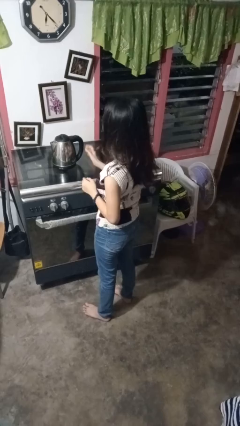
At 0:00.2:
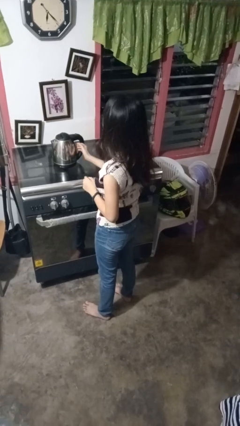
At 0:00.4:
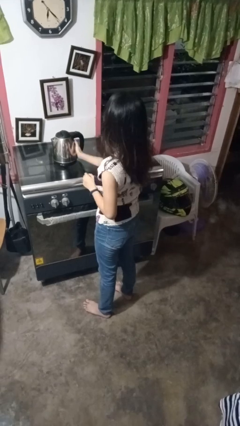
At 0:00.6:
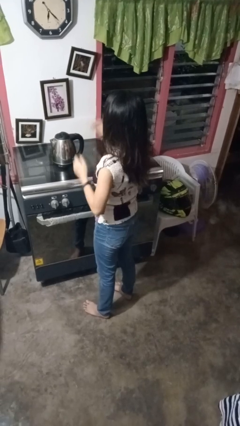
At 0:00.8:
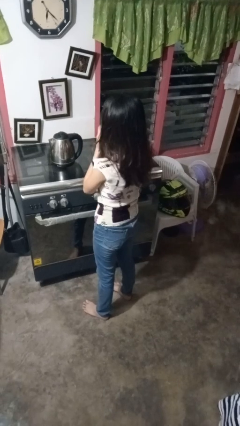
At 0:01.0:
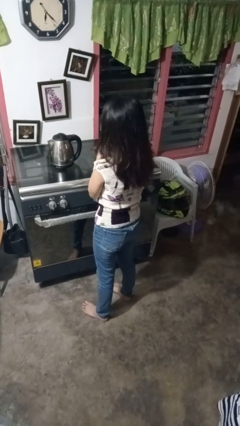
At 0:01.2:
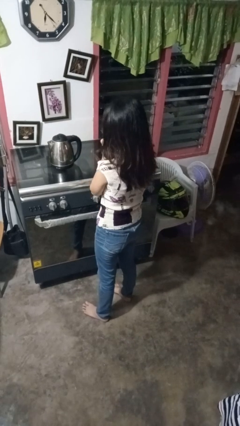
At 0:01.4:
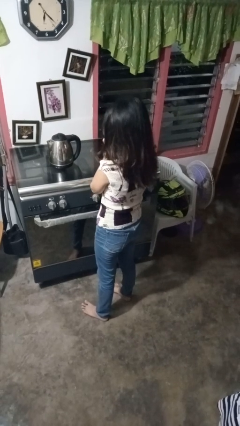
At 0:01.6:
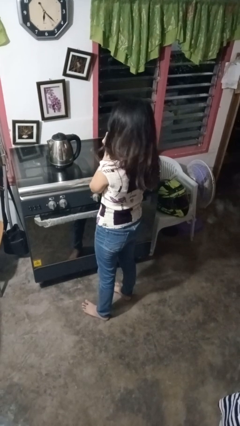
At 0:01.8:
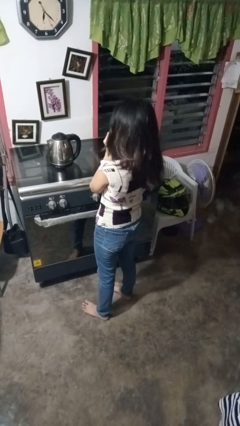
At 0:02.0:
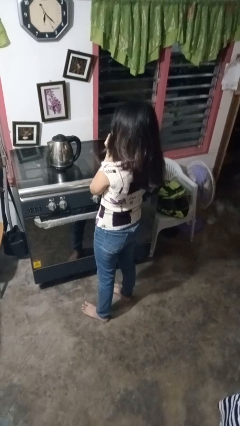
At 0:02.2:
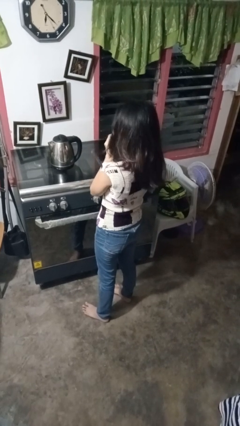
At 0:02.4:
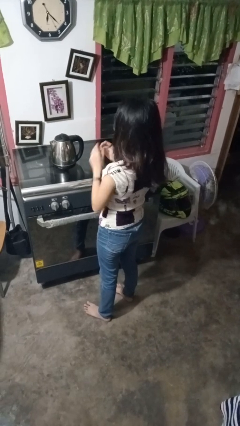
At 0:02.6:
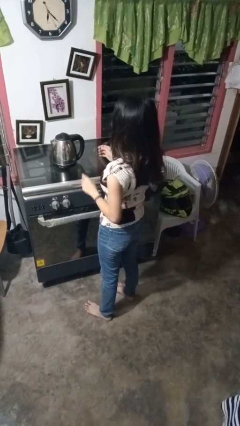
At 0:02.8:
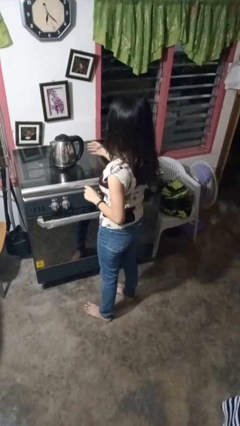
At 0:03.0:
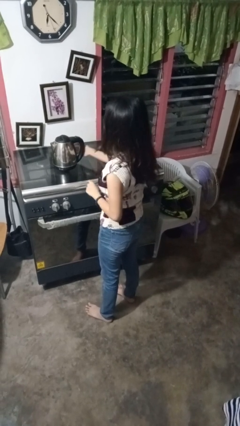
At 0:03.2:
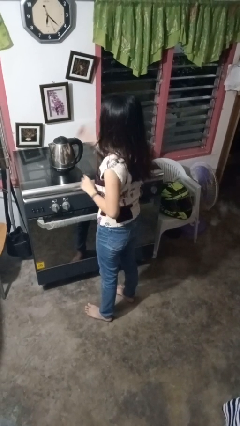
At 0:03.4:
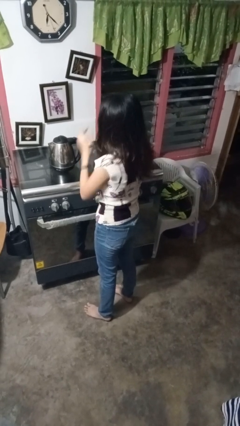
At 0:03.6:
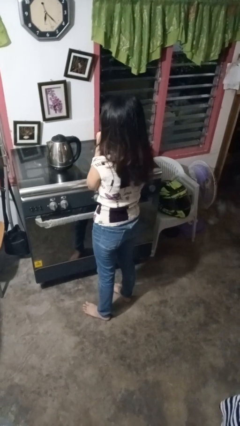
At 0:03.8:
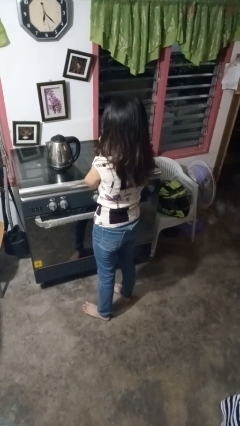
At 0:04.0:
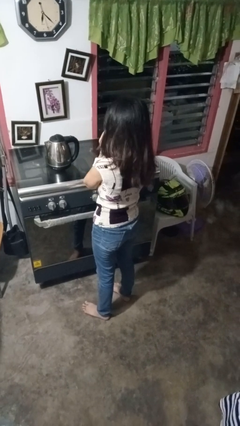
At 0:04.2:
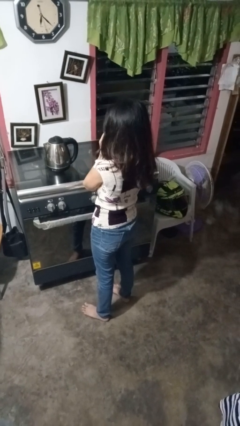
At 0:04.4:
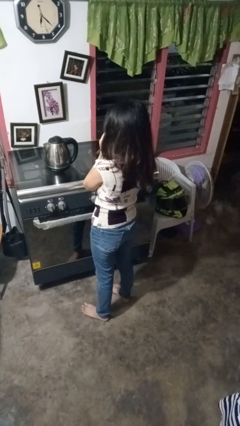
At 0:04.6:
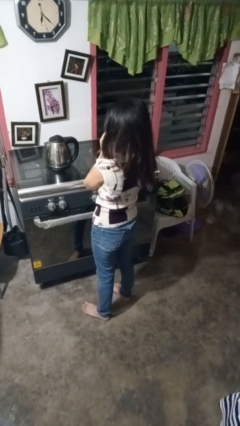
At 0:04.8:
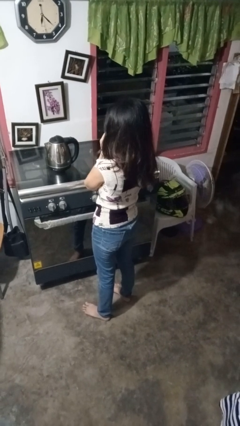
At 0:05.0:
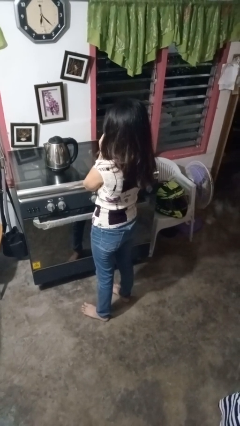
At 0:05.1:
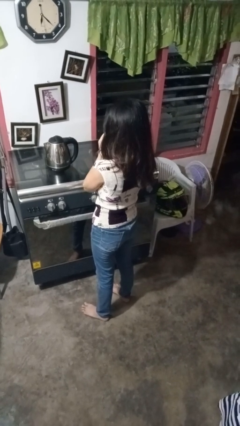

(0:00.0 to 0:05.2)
person puts on hoodie

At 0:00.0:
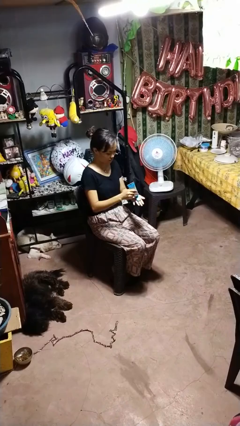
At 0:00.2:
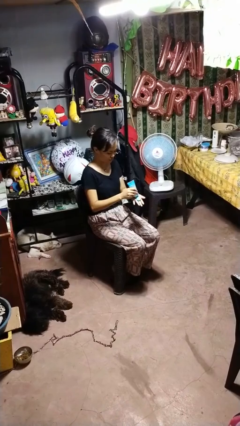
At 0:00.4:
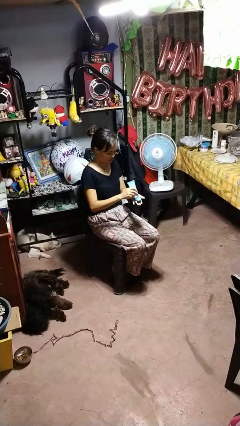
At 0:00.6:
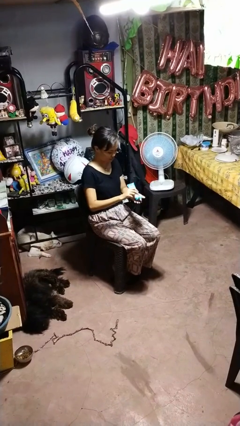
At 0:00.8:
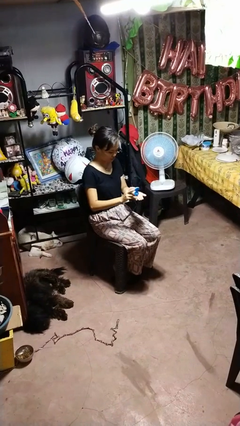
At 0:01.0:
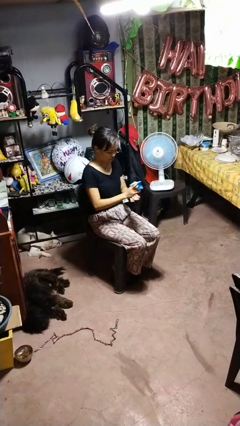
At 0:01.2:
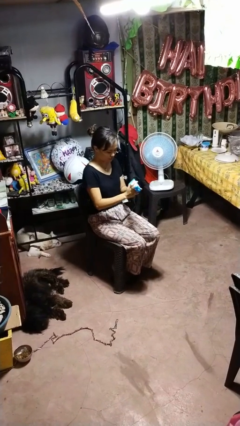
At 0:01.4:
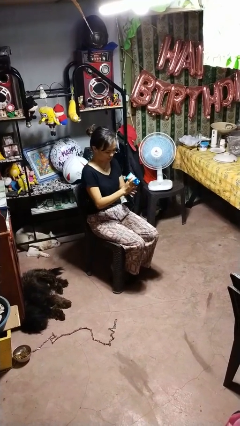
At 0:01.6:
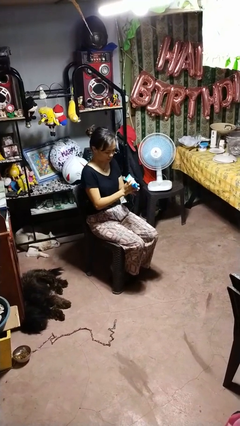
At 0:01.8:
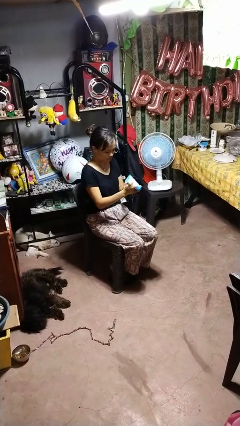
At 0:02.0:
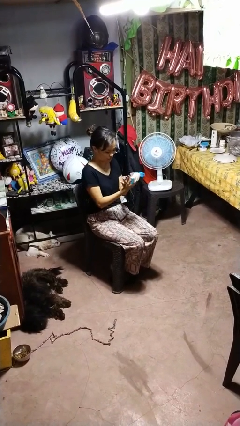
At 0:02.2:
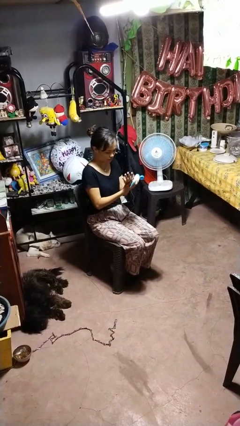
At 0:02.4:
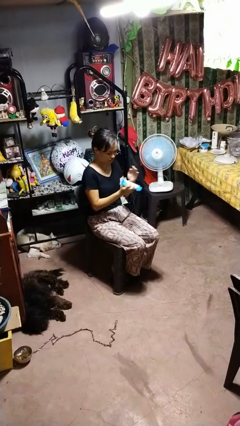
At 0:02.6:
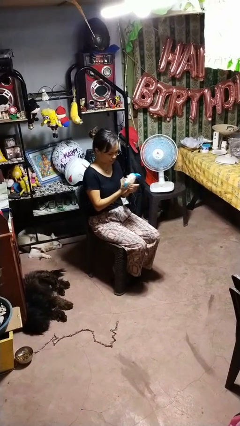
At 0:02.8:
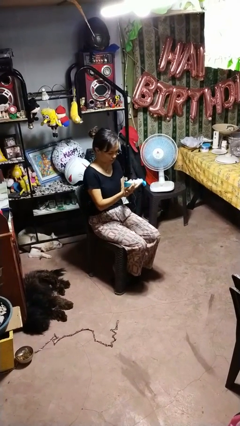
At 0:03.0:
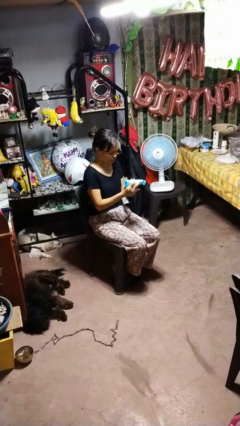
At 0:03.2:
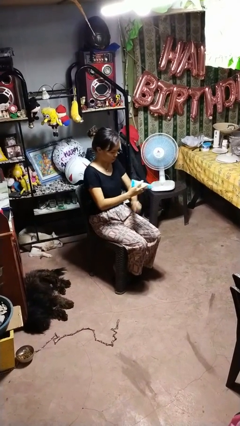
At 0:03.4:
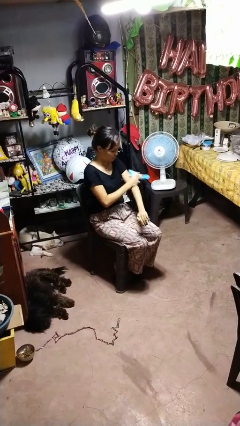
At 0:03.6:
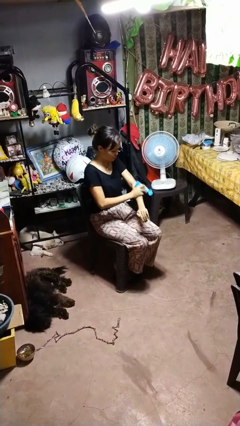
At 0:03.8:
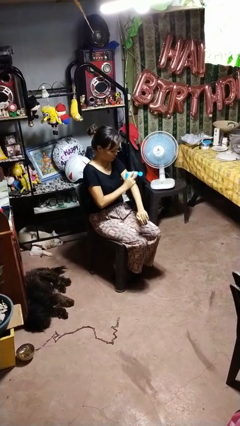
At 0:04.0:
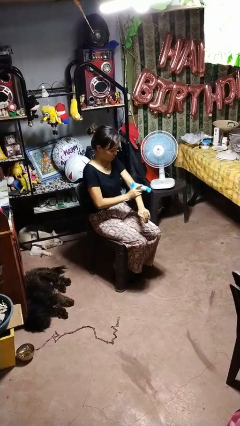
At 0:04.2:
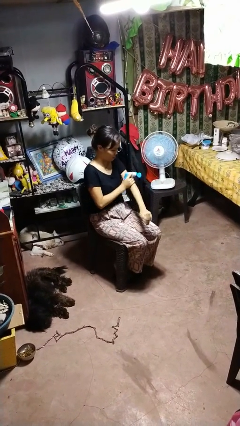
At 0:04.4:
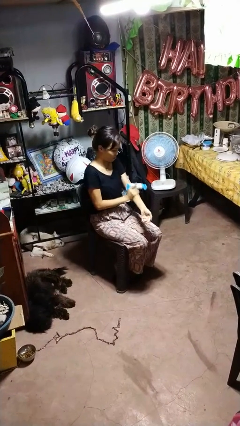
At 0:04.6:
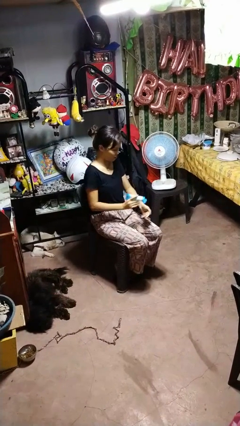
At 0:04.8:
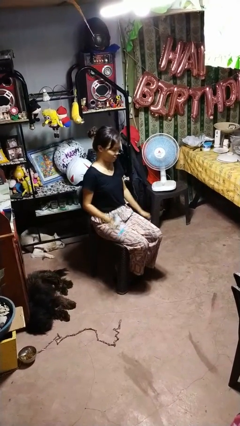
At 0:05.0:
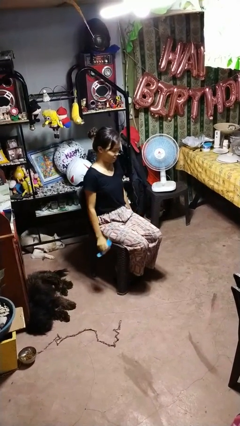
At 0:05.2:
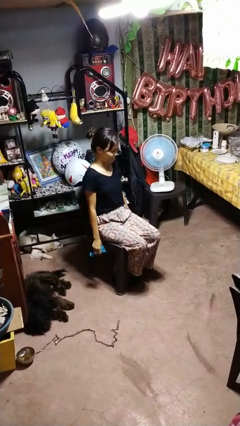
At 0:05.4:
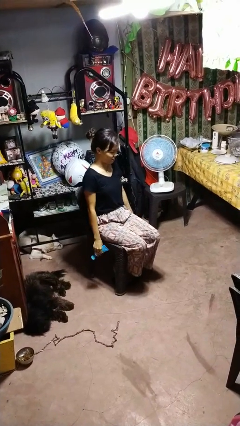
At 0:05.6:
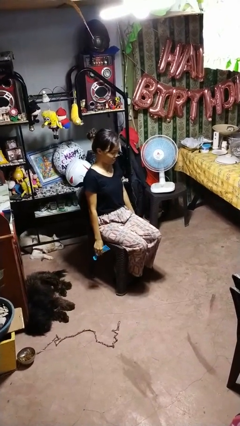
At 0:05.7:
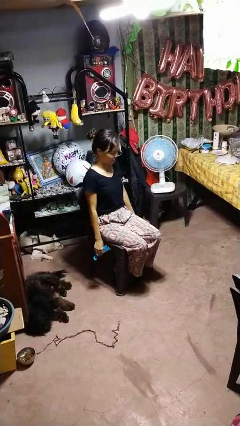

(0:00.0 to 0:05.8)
person applies sunscreen

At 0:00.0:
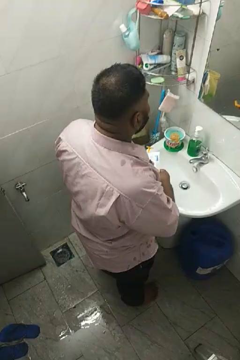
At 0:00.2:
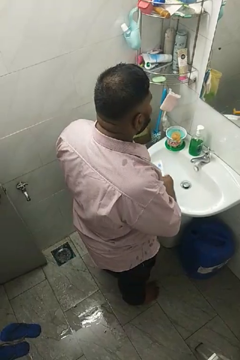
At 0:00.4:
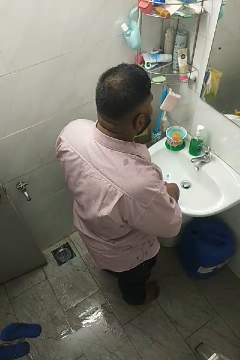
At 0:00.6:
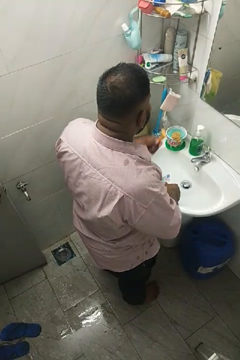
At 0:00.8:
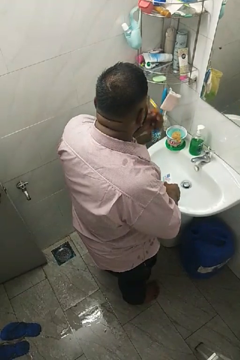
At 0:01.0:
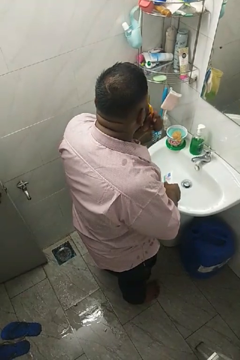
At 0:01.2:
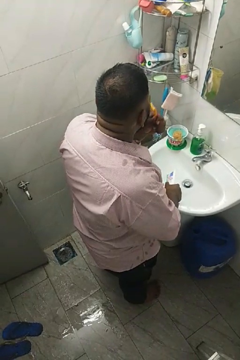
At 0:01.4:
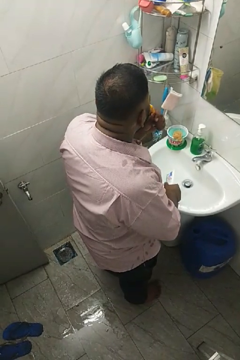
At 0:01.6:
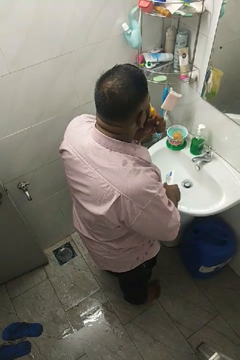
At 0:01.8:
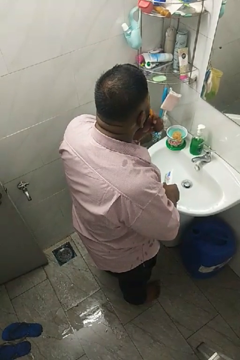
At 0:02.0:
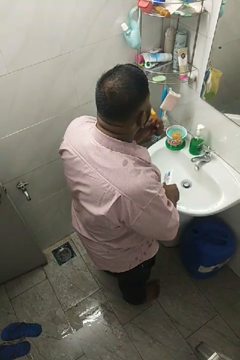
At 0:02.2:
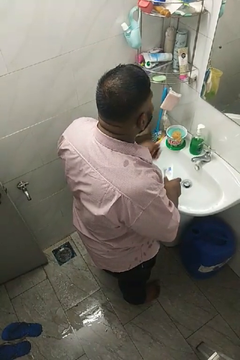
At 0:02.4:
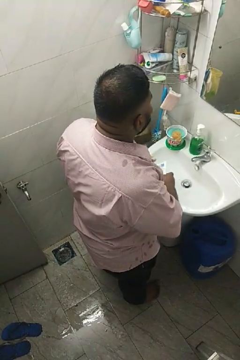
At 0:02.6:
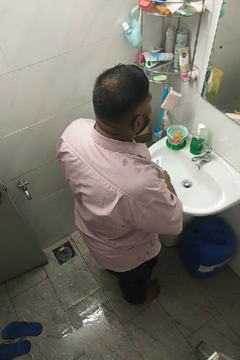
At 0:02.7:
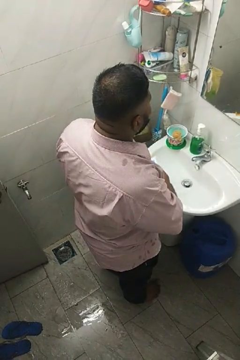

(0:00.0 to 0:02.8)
person shaves face

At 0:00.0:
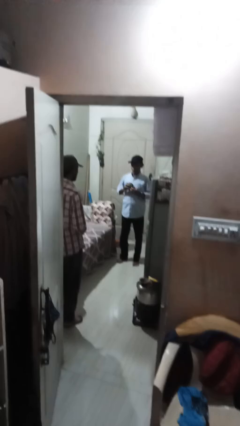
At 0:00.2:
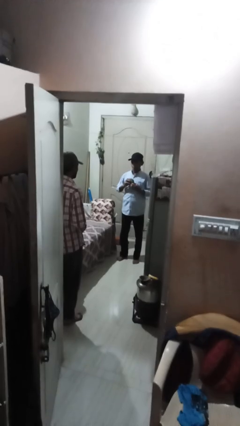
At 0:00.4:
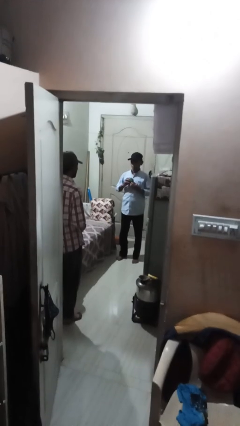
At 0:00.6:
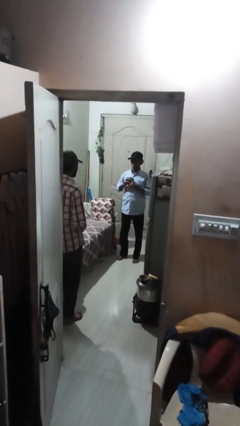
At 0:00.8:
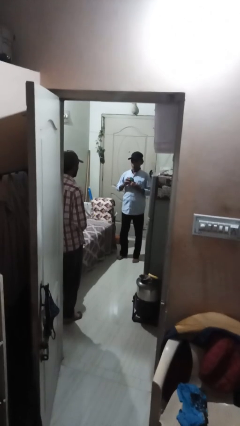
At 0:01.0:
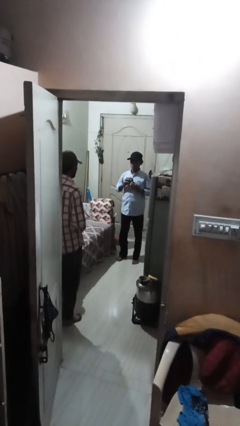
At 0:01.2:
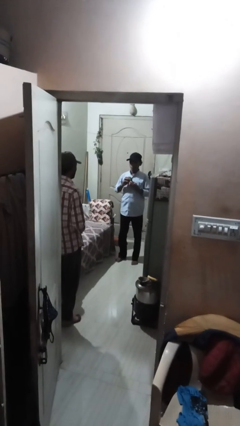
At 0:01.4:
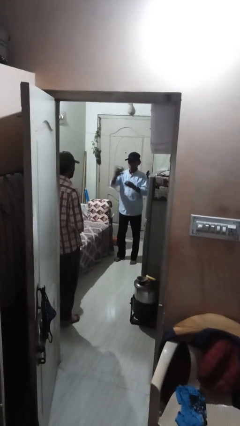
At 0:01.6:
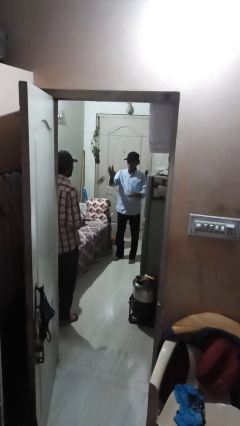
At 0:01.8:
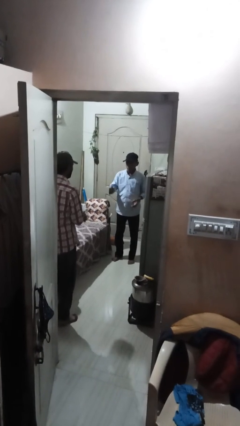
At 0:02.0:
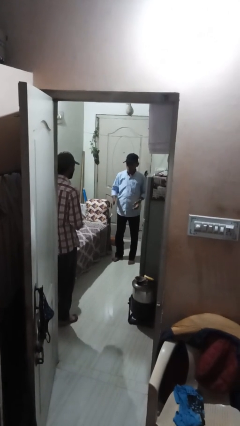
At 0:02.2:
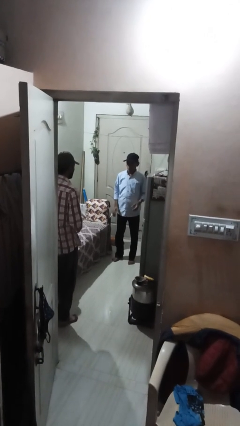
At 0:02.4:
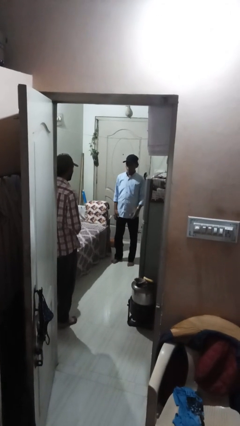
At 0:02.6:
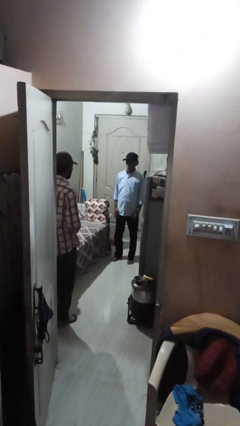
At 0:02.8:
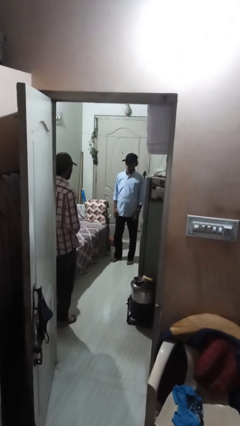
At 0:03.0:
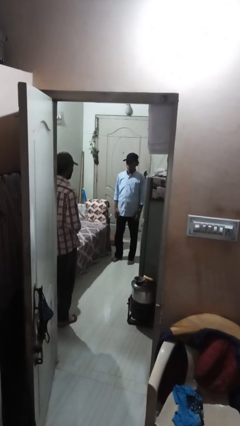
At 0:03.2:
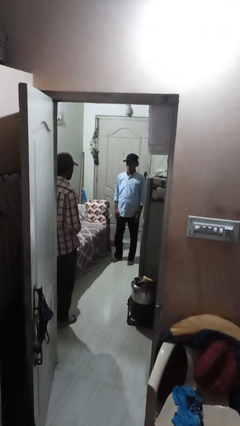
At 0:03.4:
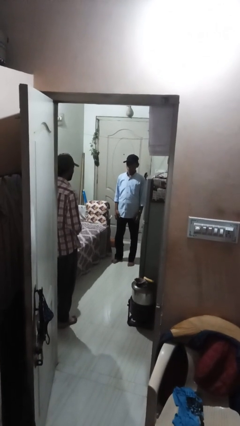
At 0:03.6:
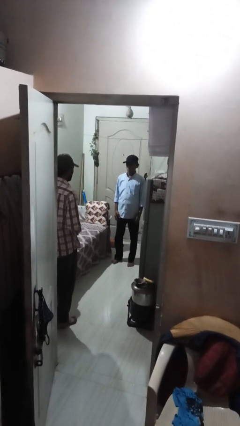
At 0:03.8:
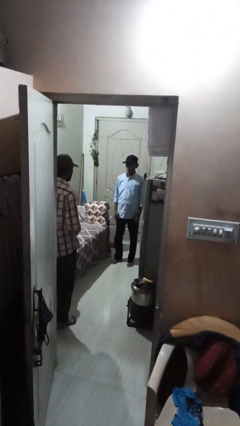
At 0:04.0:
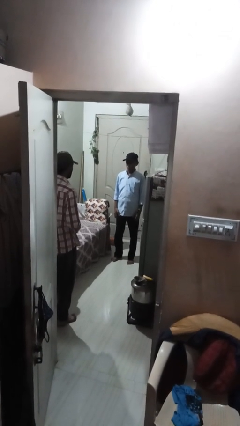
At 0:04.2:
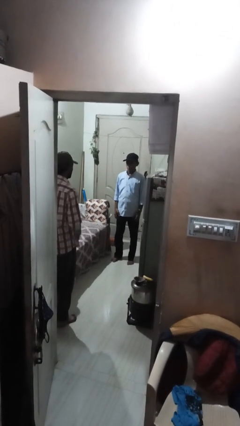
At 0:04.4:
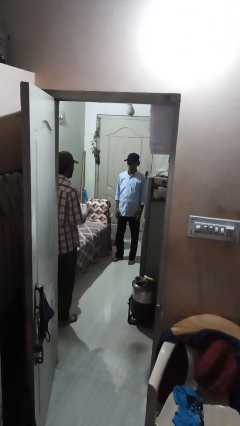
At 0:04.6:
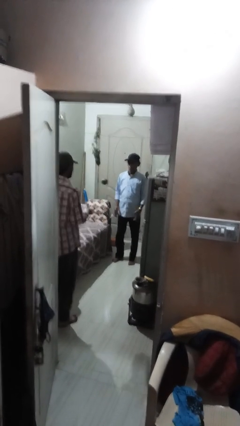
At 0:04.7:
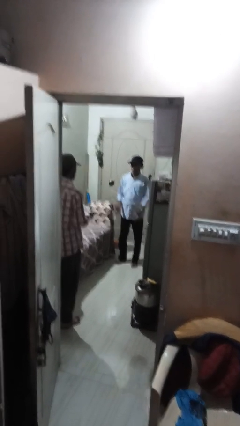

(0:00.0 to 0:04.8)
person throws object to person
